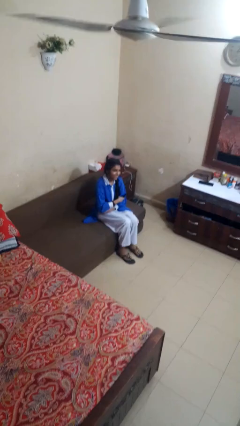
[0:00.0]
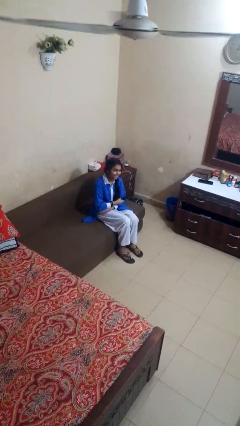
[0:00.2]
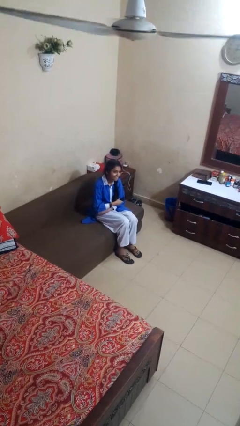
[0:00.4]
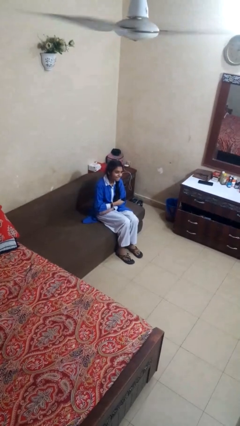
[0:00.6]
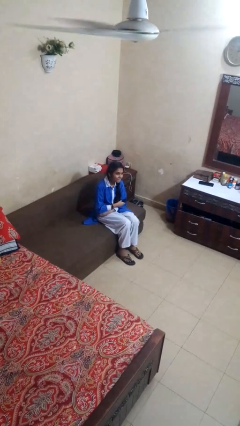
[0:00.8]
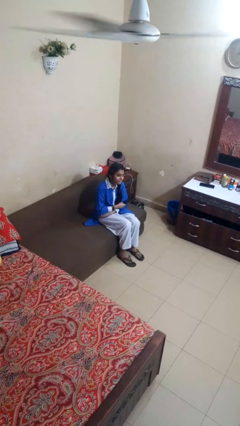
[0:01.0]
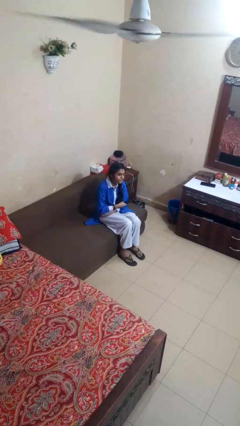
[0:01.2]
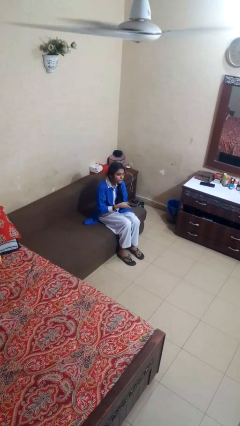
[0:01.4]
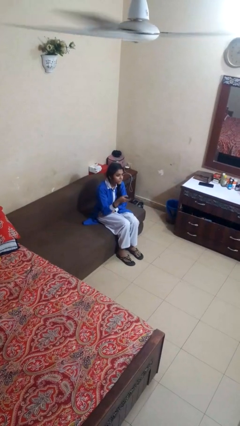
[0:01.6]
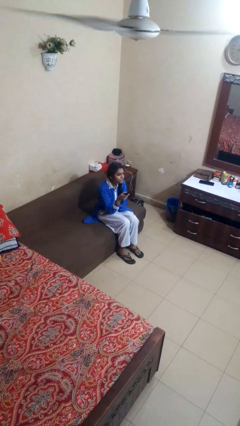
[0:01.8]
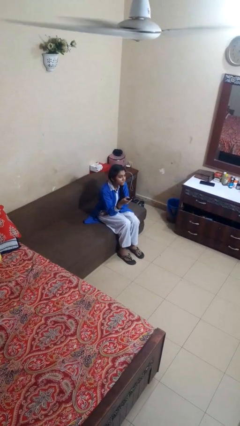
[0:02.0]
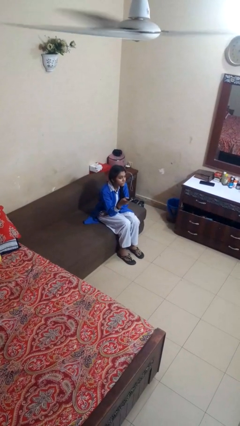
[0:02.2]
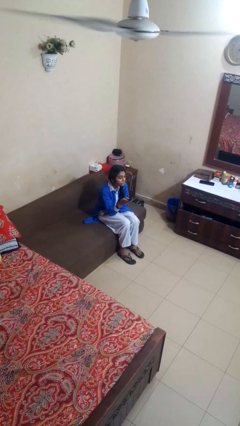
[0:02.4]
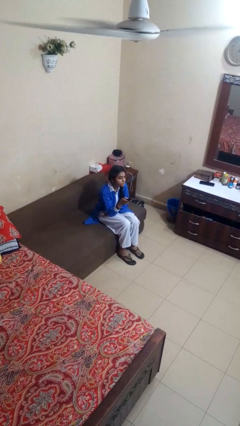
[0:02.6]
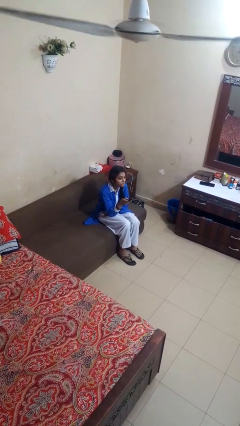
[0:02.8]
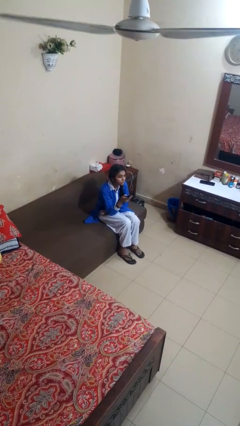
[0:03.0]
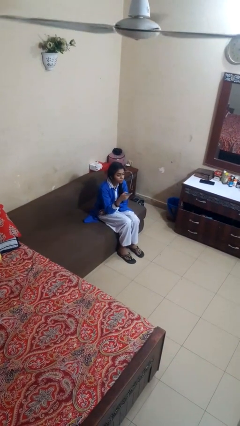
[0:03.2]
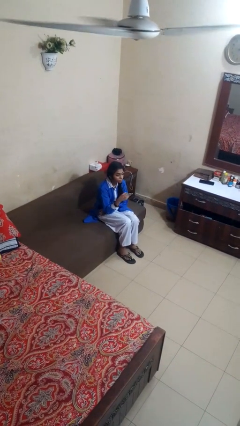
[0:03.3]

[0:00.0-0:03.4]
person uses television remote

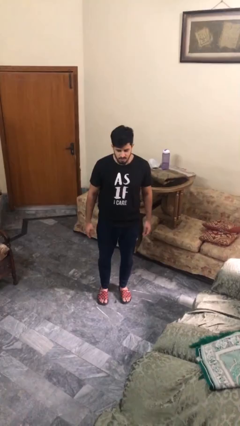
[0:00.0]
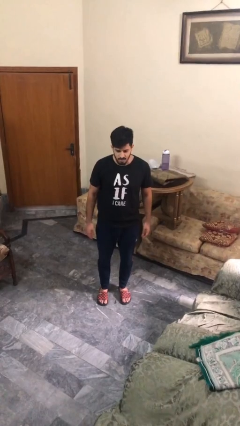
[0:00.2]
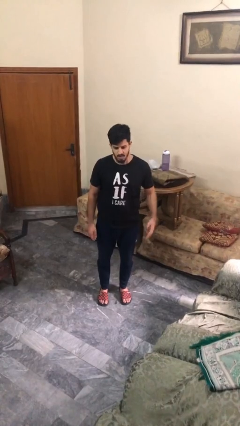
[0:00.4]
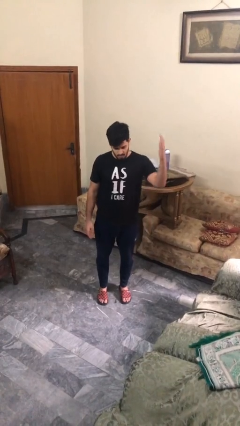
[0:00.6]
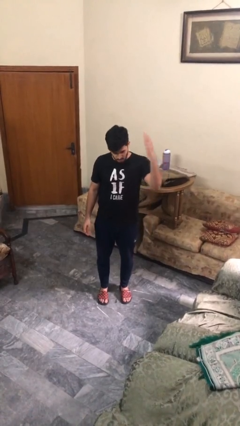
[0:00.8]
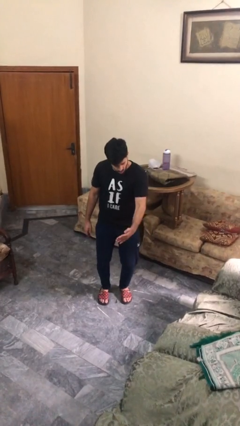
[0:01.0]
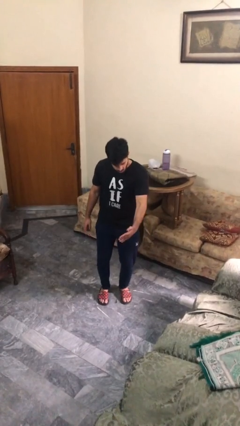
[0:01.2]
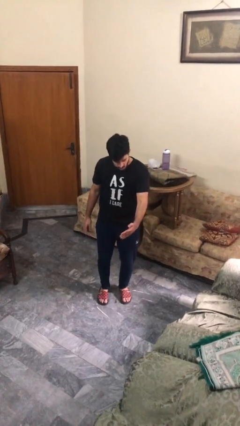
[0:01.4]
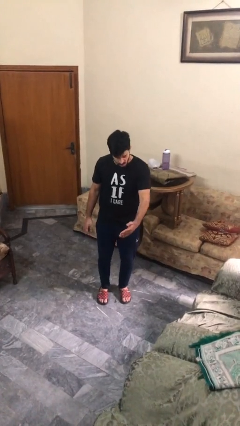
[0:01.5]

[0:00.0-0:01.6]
person karate chop

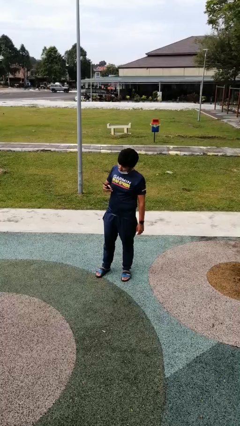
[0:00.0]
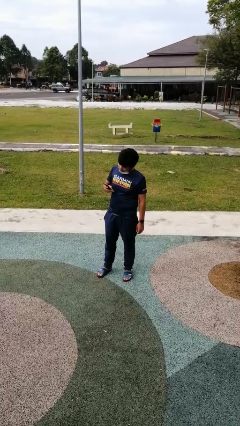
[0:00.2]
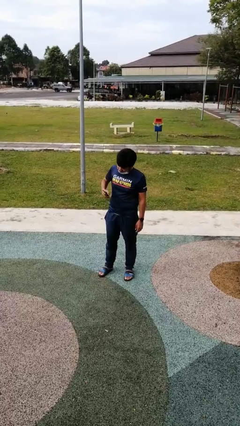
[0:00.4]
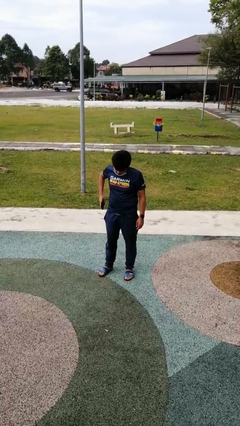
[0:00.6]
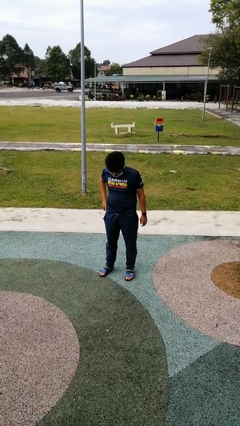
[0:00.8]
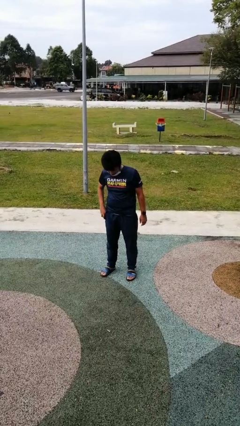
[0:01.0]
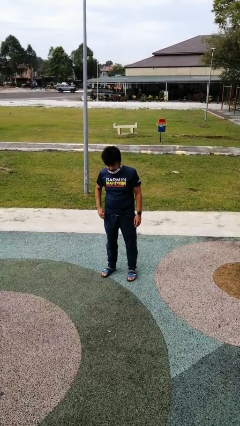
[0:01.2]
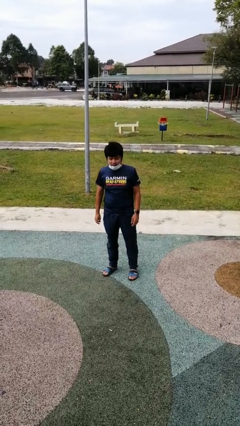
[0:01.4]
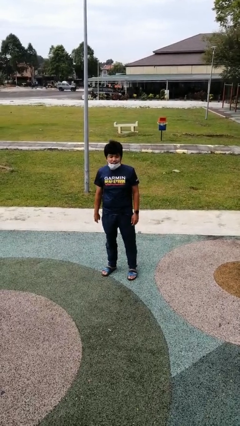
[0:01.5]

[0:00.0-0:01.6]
person puts phone into pocket

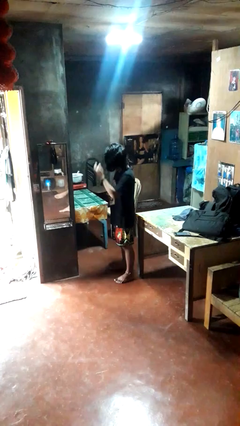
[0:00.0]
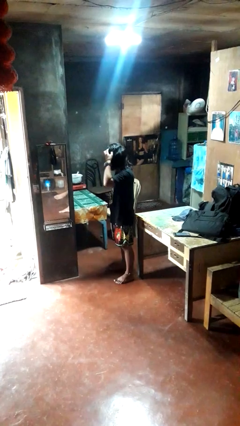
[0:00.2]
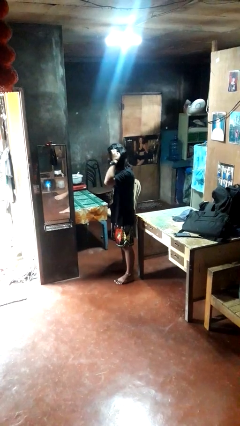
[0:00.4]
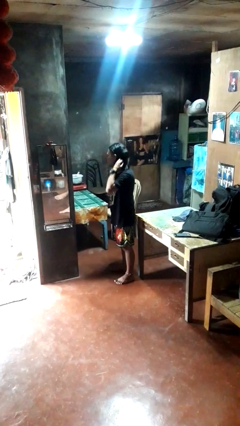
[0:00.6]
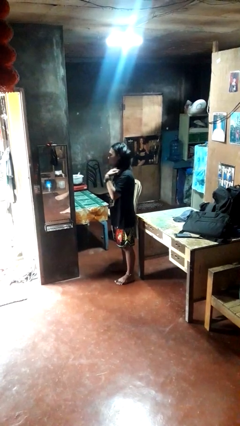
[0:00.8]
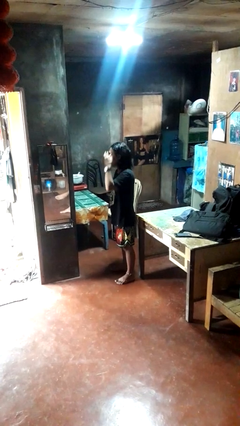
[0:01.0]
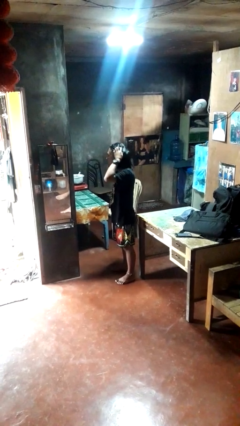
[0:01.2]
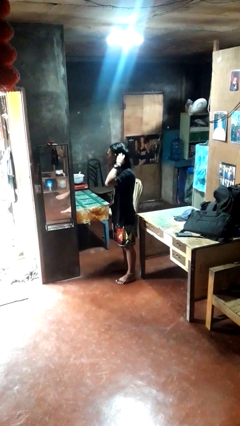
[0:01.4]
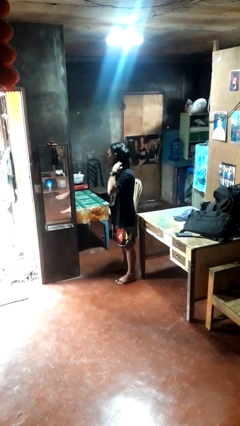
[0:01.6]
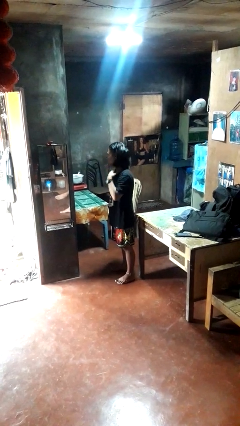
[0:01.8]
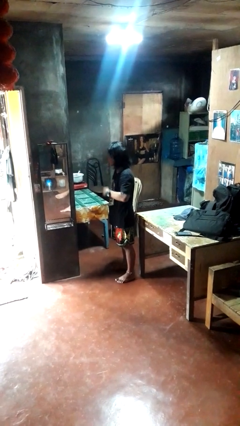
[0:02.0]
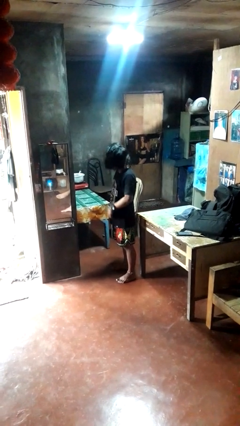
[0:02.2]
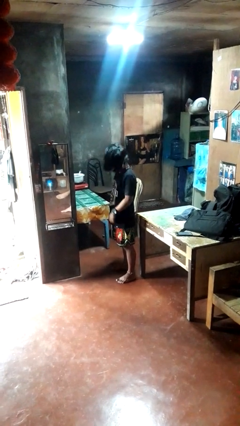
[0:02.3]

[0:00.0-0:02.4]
person strokes hair

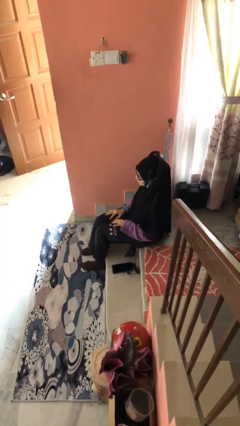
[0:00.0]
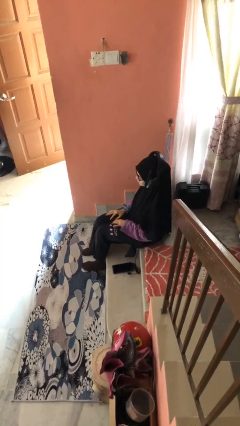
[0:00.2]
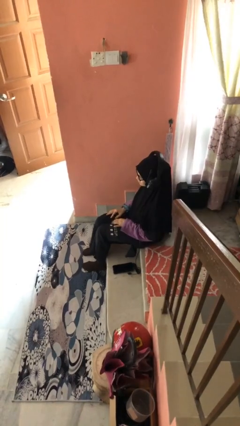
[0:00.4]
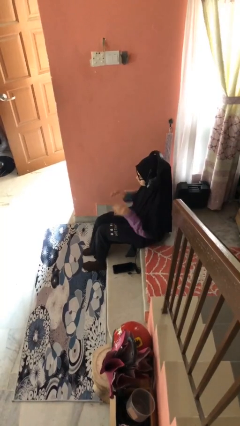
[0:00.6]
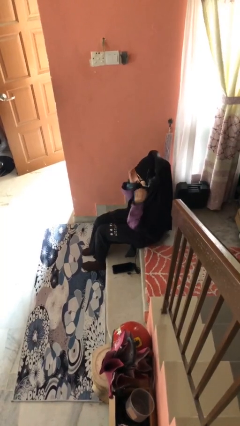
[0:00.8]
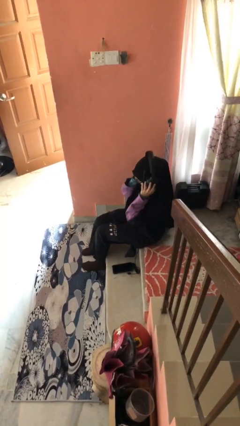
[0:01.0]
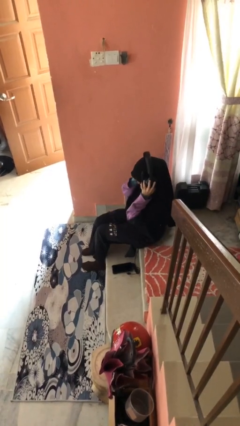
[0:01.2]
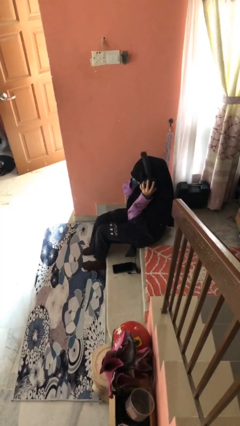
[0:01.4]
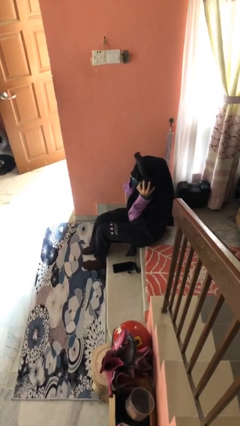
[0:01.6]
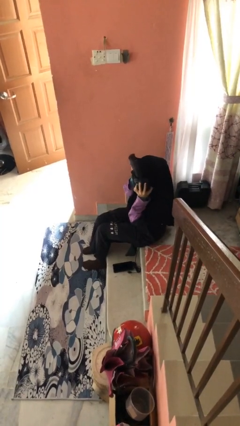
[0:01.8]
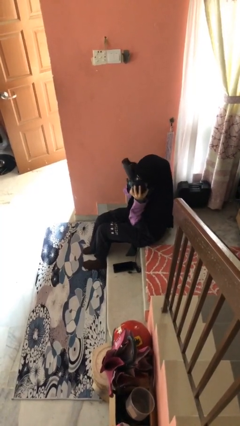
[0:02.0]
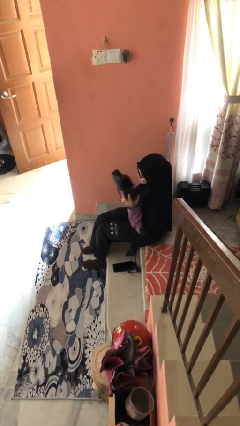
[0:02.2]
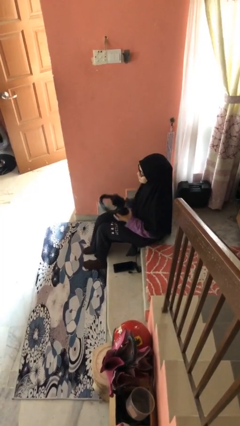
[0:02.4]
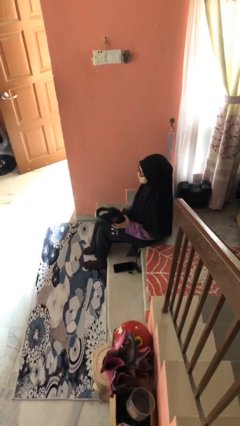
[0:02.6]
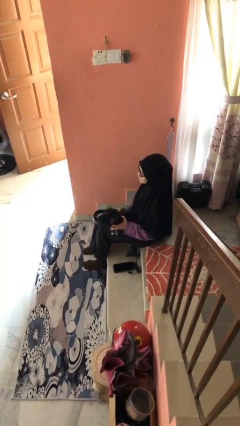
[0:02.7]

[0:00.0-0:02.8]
person takes off headphones

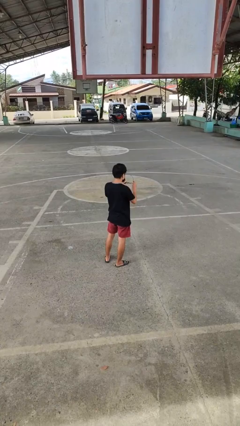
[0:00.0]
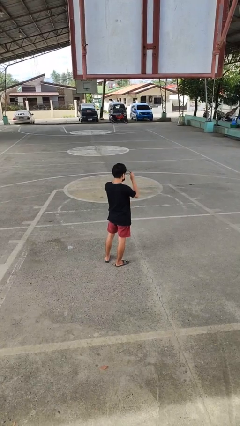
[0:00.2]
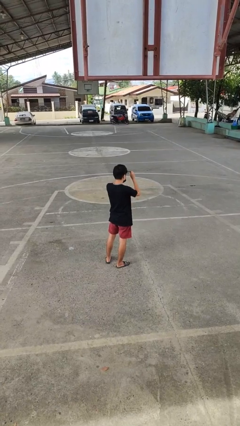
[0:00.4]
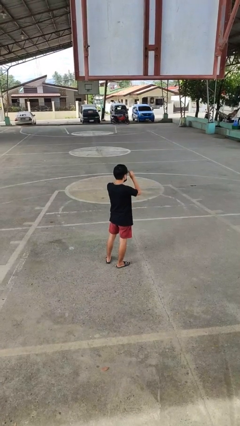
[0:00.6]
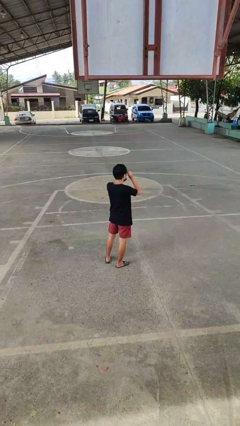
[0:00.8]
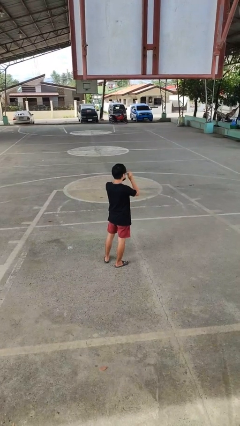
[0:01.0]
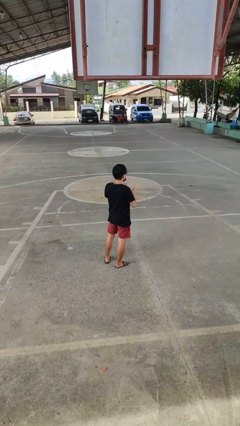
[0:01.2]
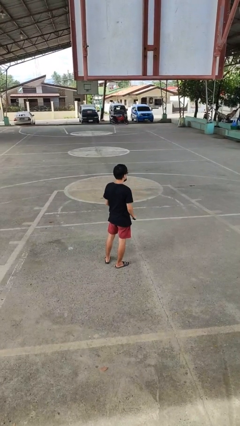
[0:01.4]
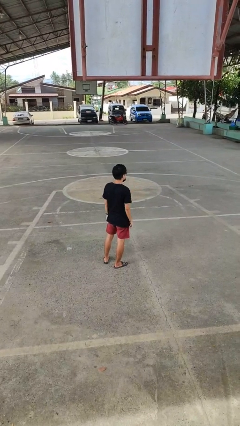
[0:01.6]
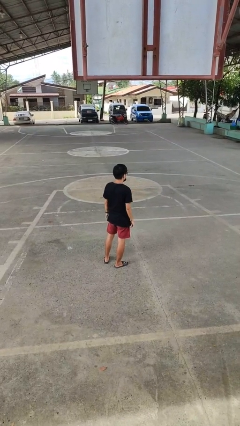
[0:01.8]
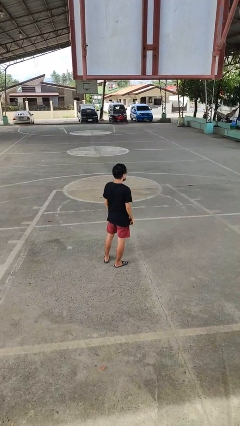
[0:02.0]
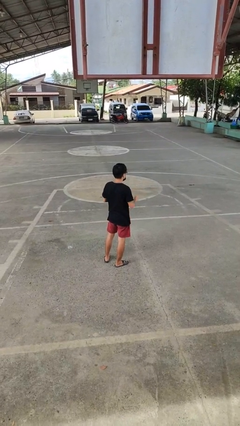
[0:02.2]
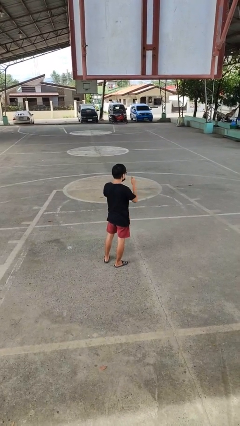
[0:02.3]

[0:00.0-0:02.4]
person puts on glasses

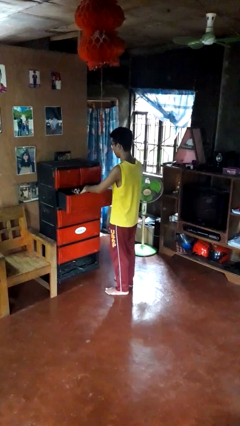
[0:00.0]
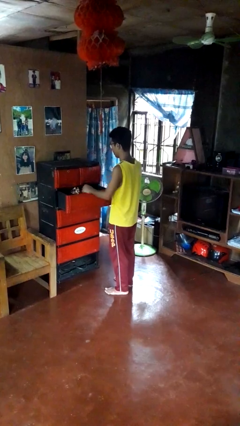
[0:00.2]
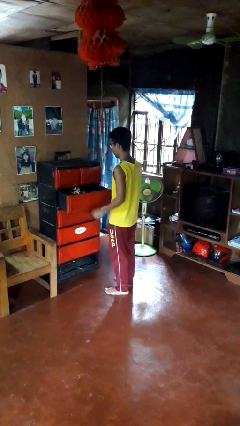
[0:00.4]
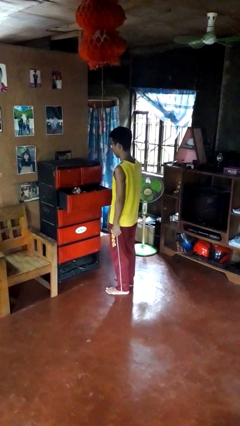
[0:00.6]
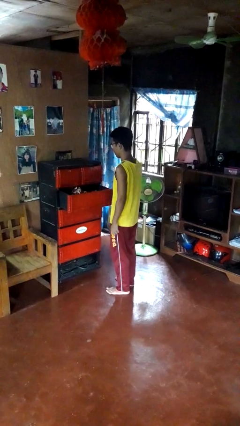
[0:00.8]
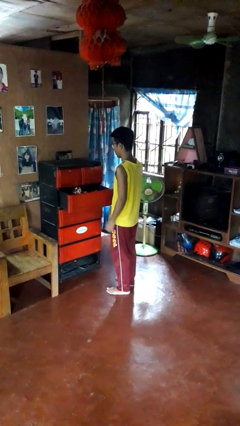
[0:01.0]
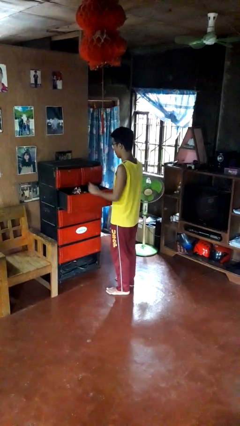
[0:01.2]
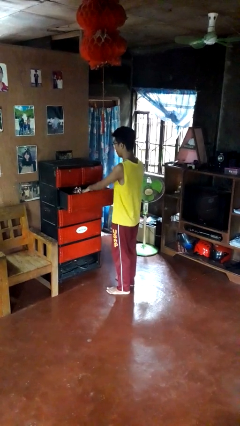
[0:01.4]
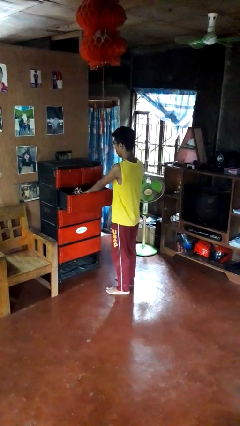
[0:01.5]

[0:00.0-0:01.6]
person puts clothes into dresser

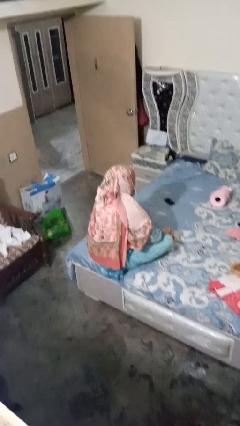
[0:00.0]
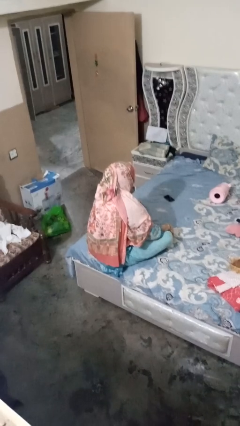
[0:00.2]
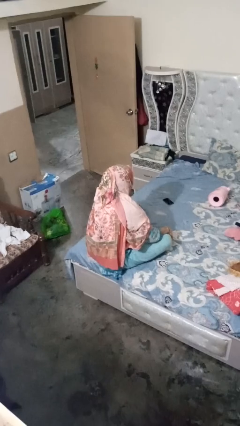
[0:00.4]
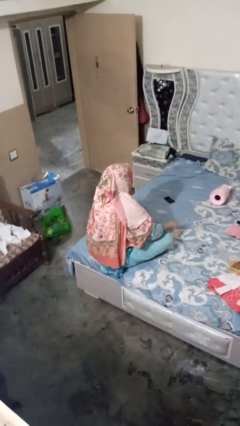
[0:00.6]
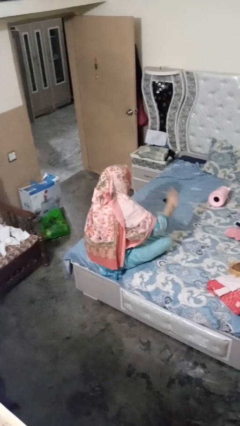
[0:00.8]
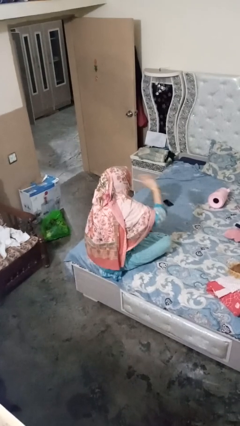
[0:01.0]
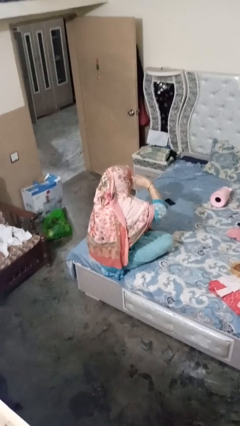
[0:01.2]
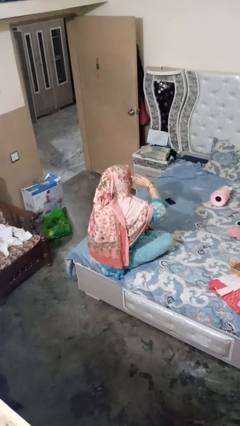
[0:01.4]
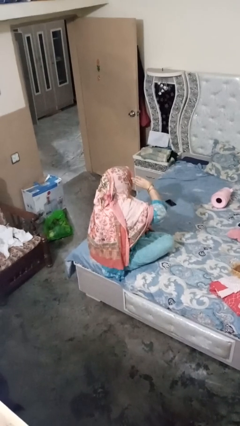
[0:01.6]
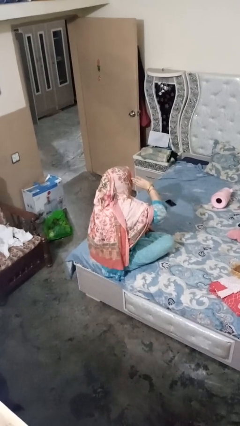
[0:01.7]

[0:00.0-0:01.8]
person salutes
